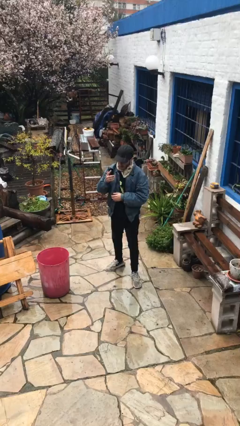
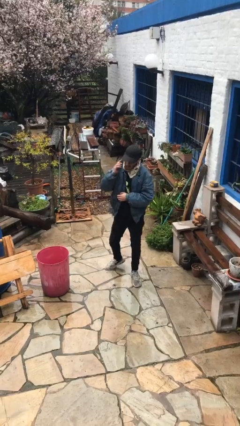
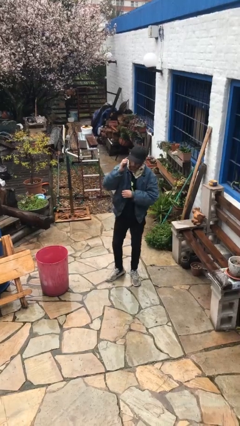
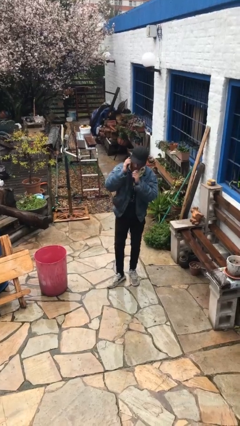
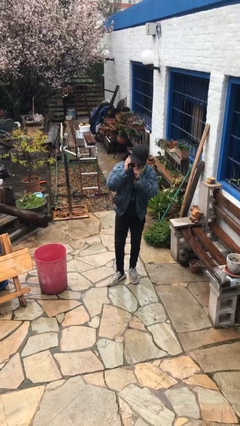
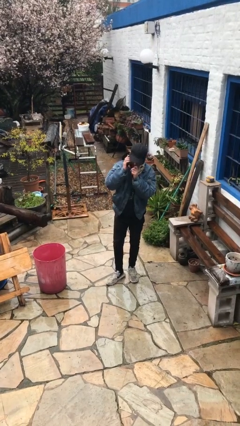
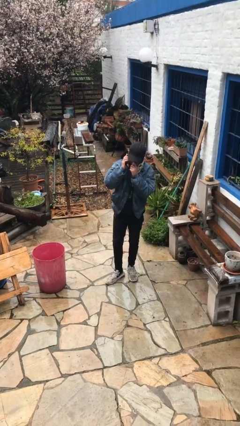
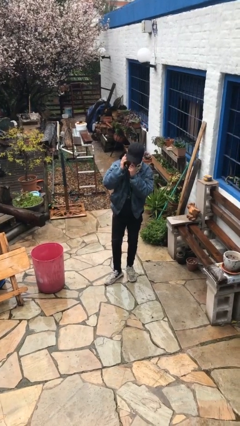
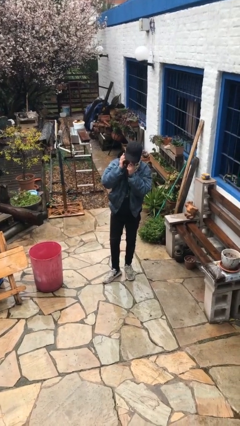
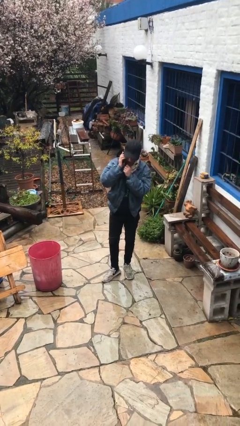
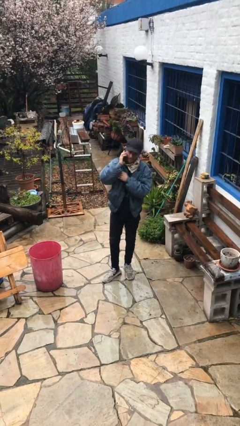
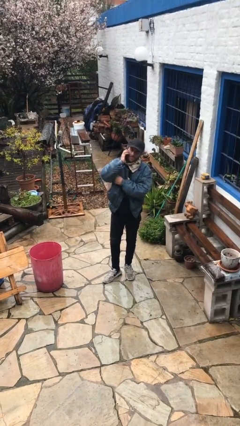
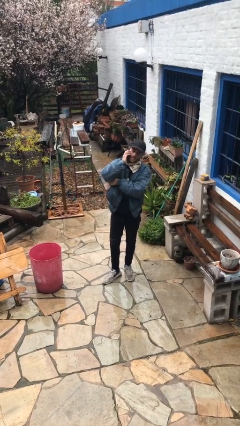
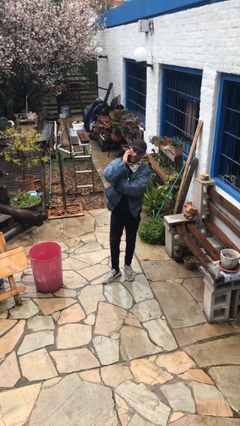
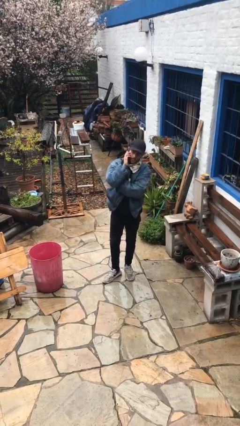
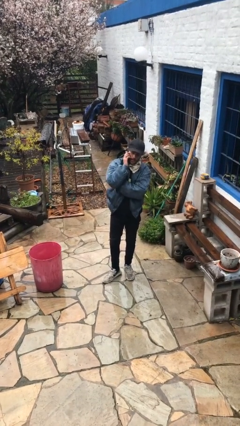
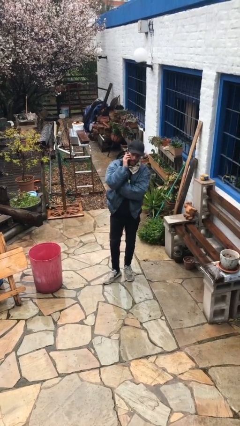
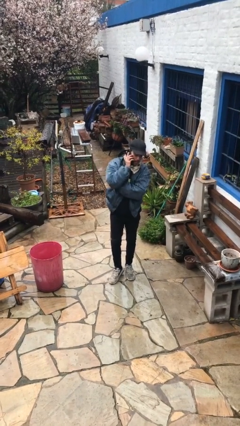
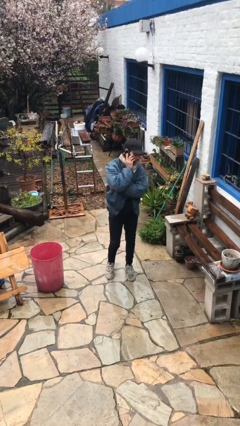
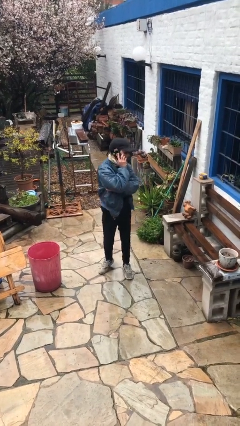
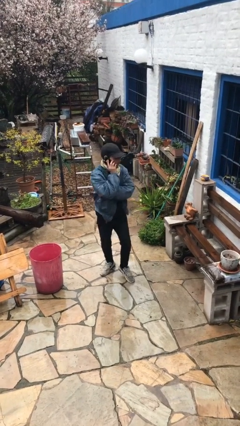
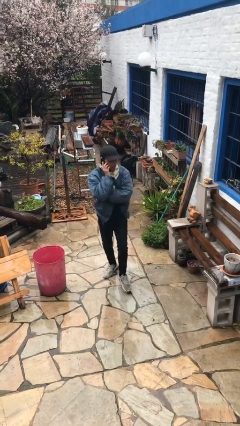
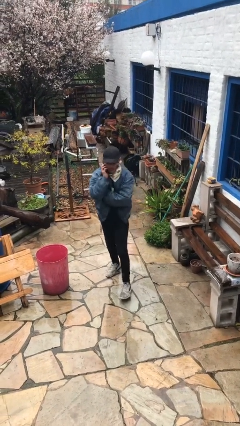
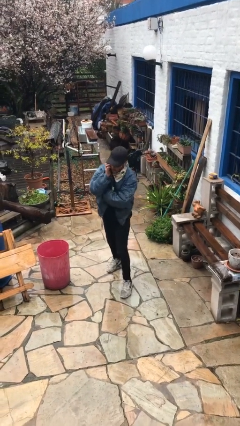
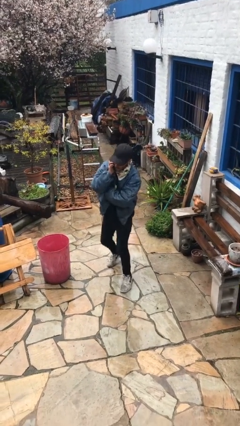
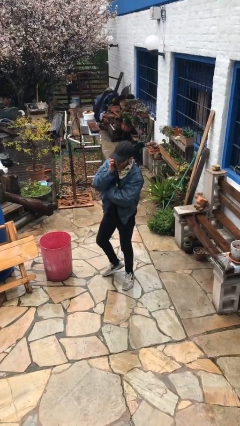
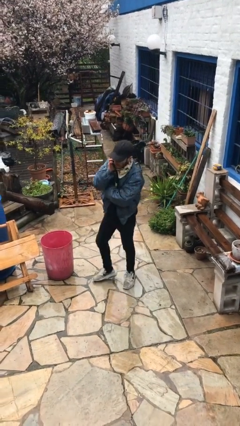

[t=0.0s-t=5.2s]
person talks on phone

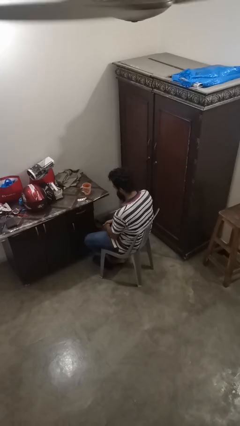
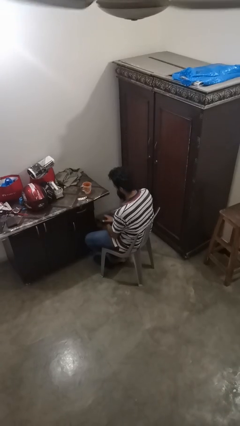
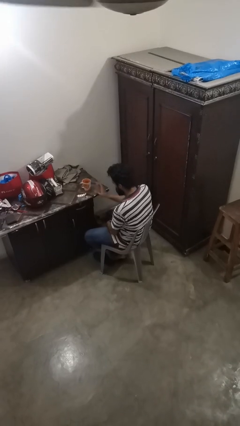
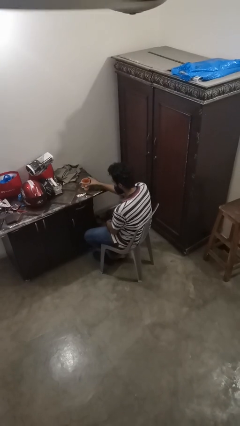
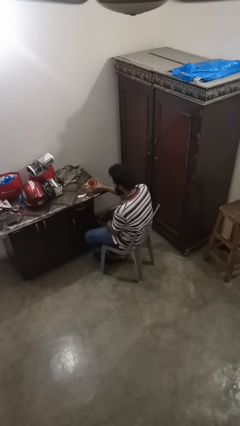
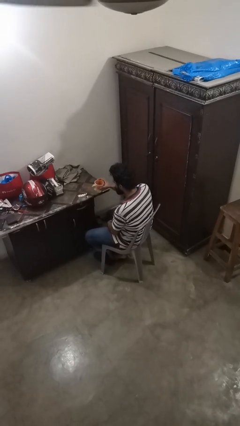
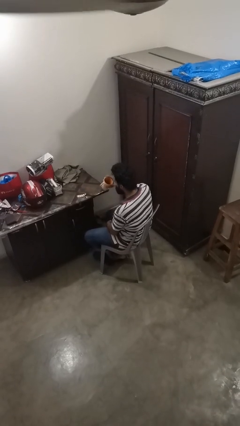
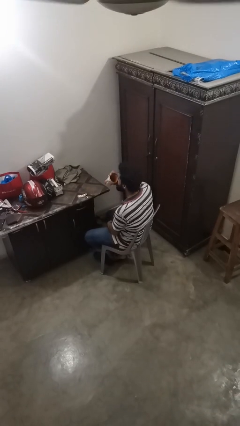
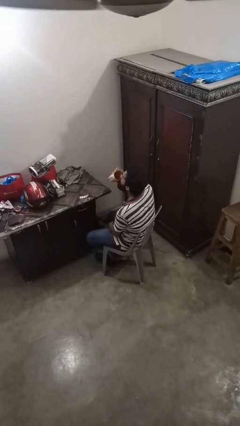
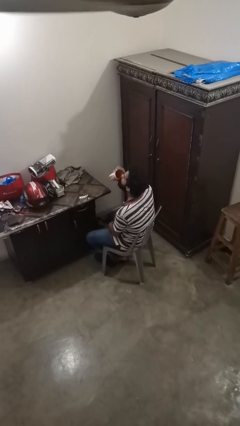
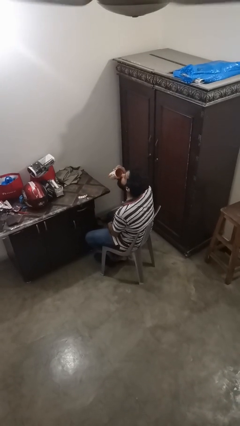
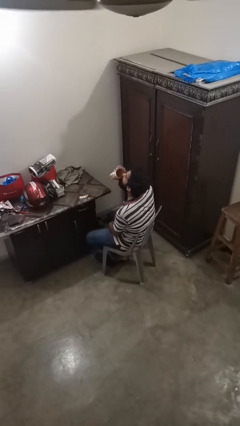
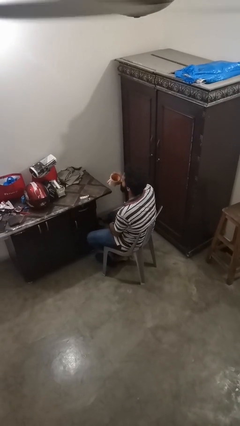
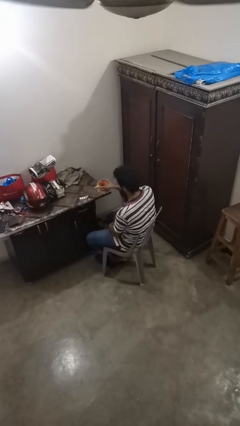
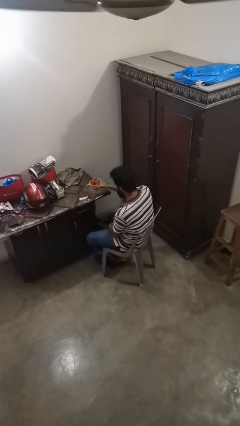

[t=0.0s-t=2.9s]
person drinks from cup

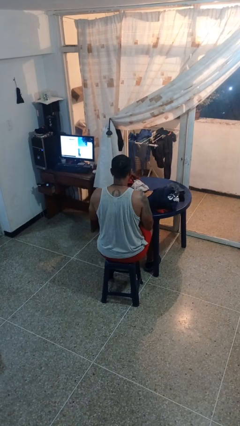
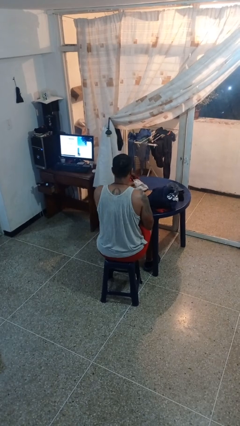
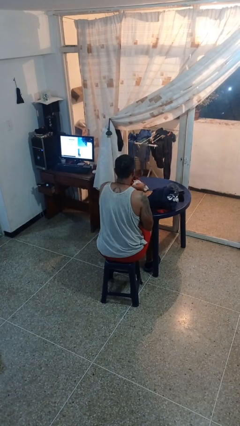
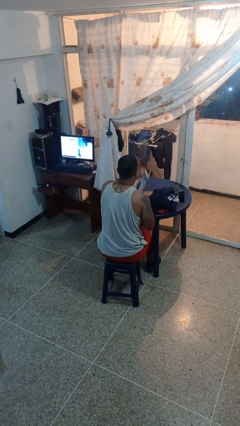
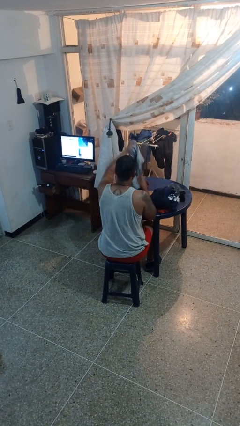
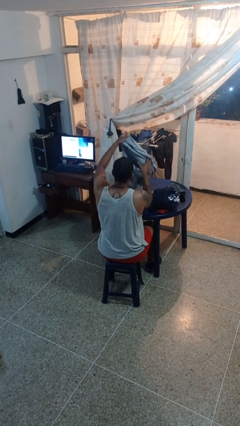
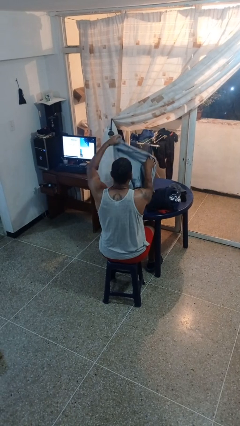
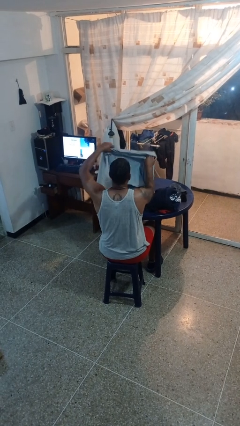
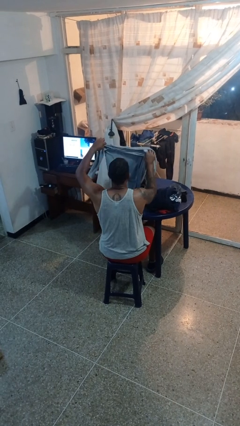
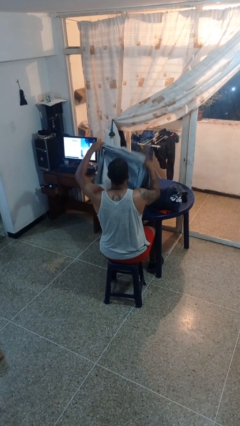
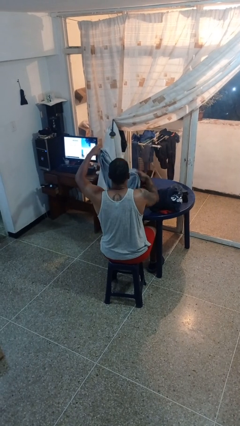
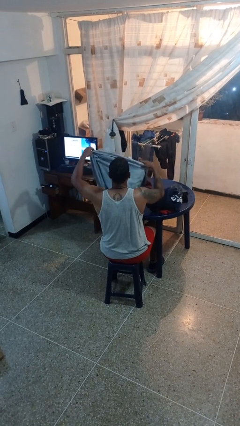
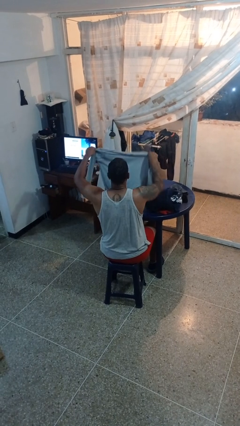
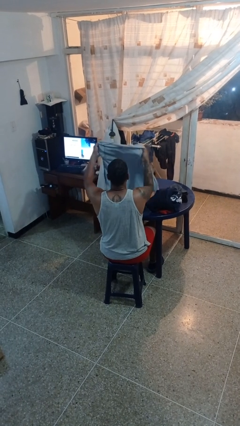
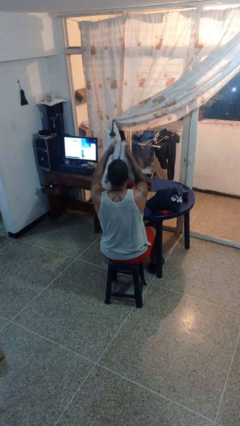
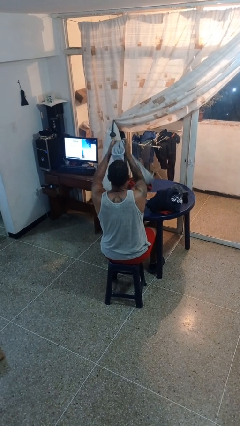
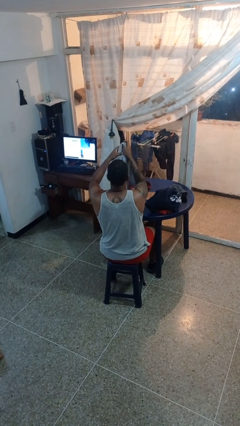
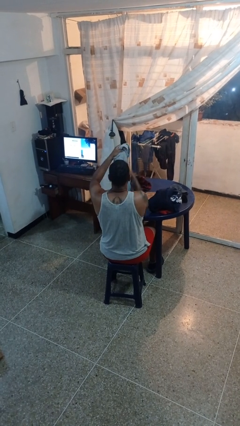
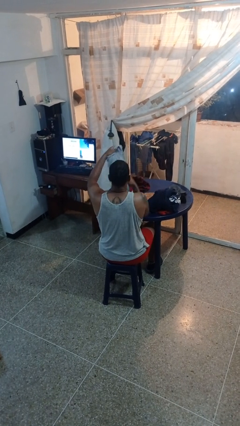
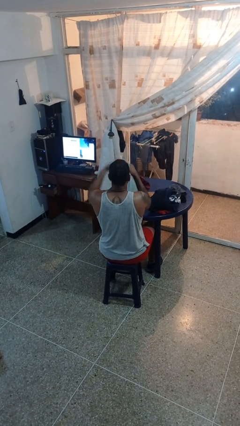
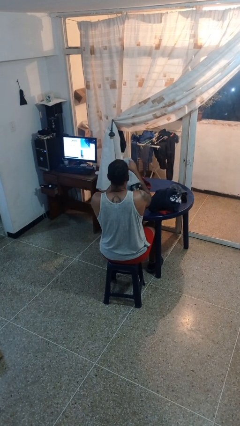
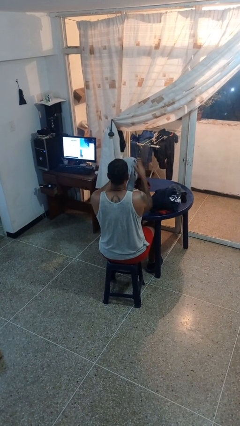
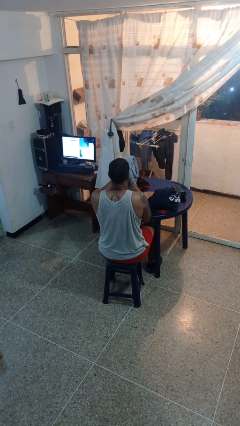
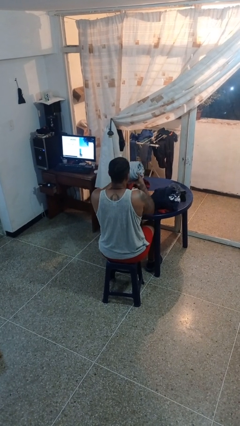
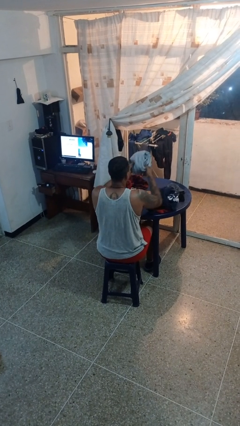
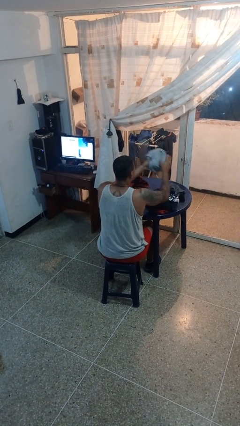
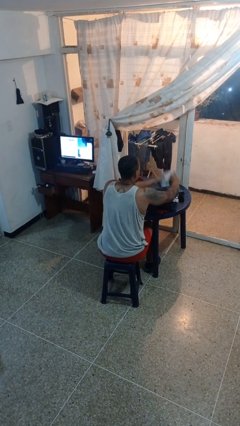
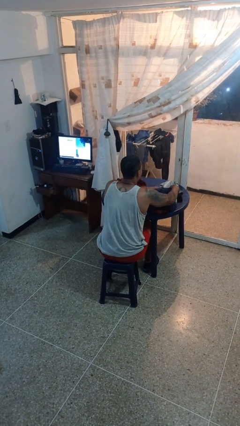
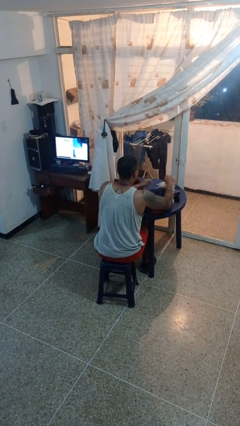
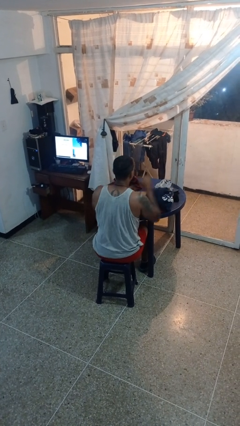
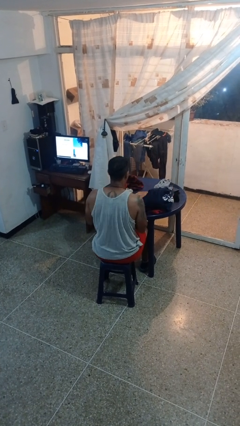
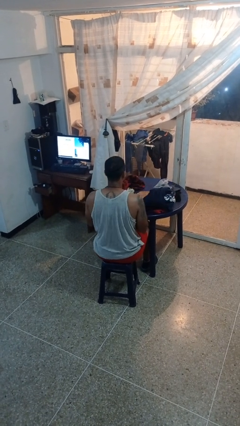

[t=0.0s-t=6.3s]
person folds shirt

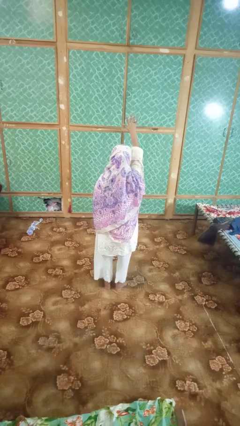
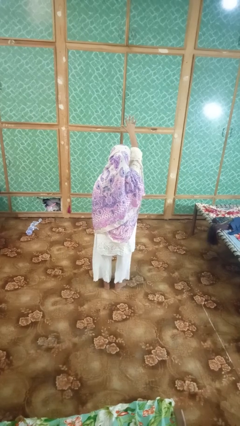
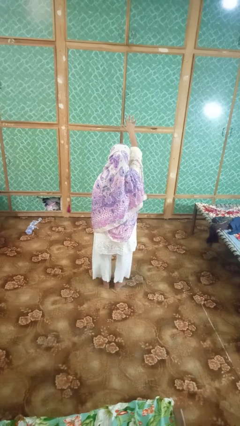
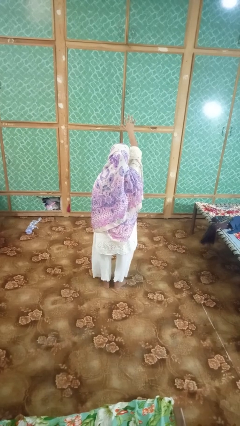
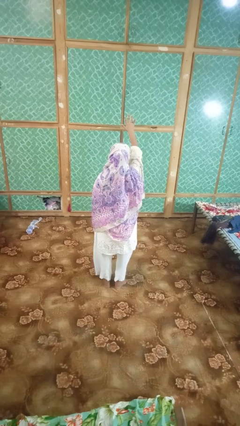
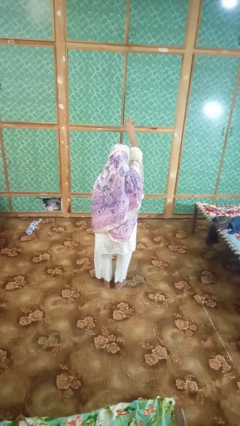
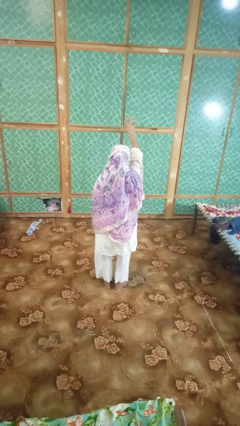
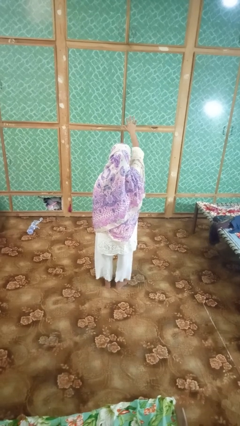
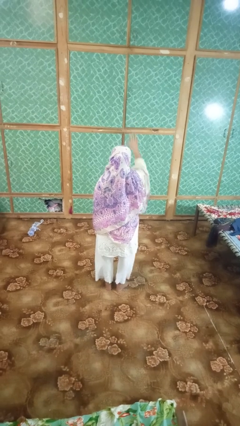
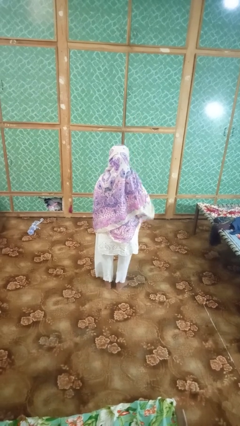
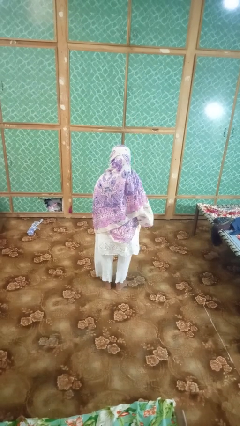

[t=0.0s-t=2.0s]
person gestures number five

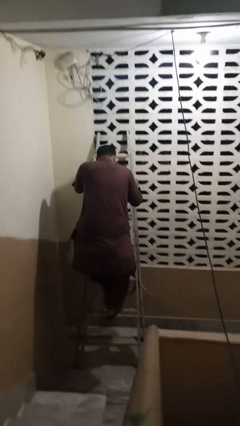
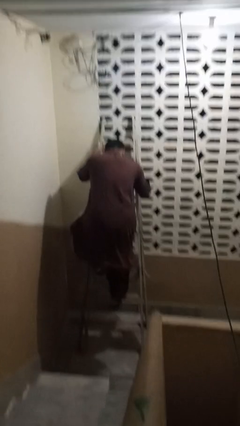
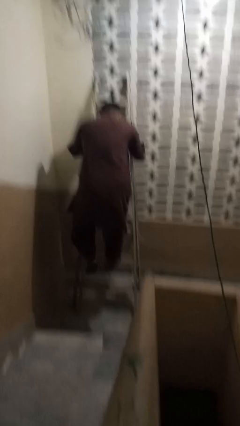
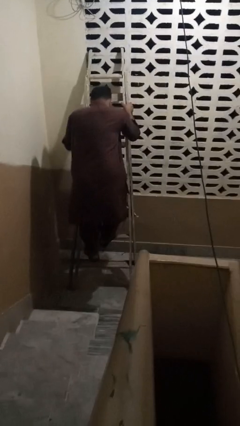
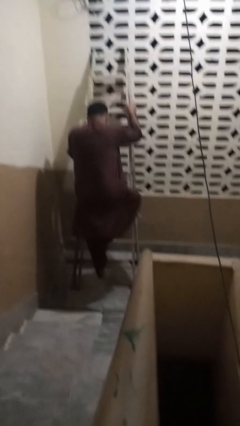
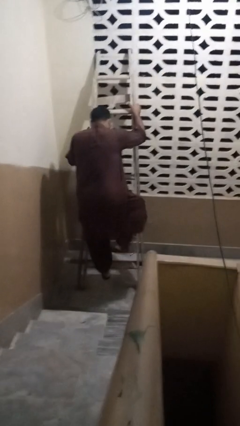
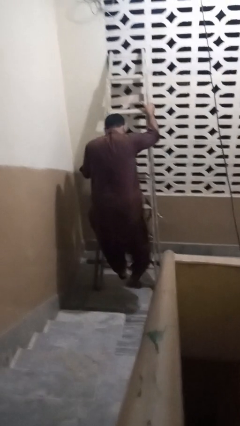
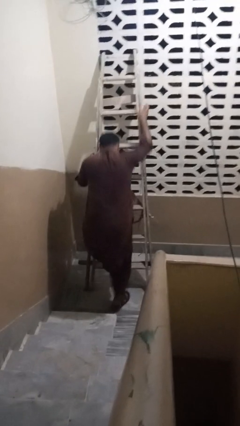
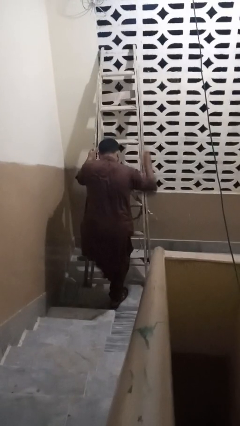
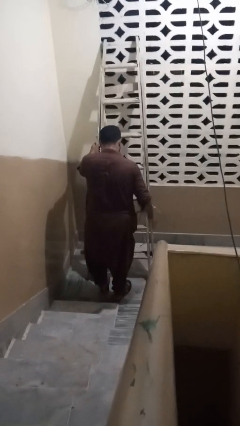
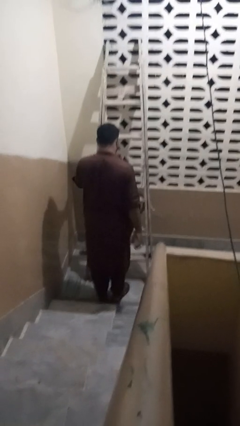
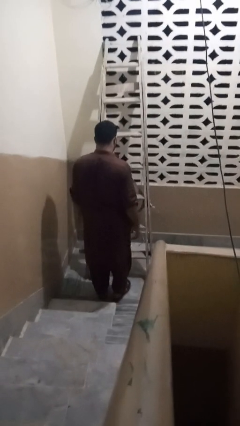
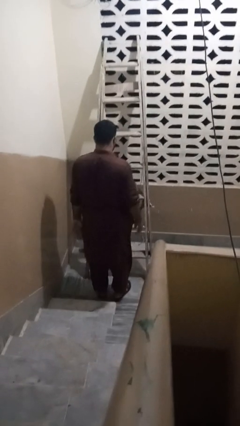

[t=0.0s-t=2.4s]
person climbs down ladder
